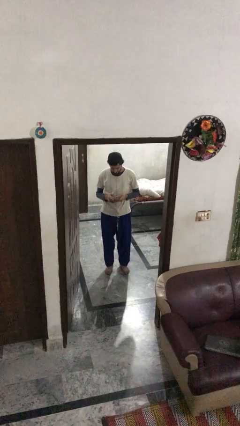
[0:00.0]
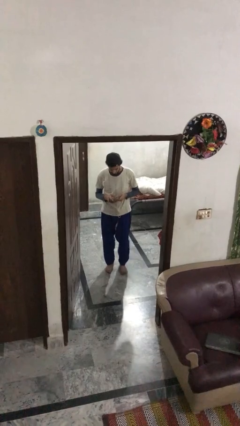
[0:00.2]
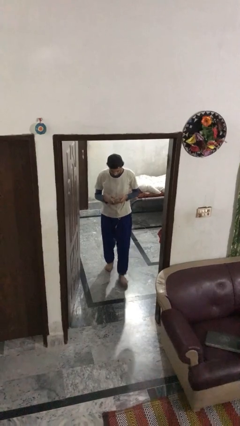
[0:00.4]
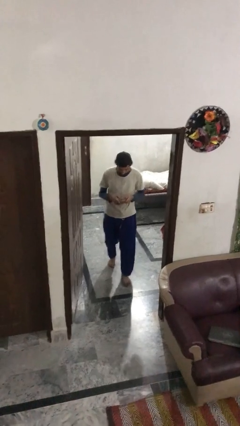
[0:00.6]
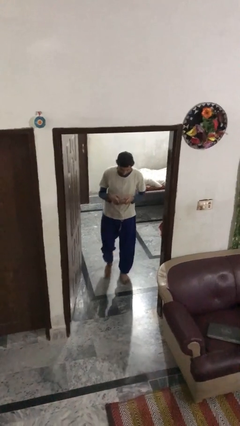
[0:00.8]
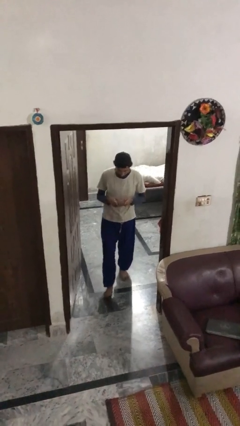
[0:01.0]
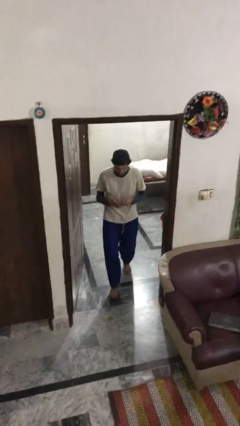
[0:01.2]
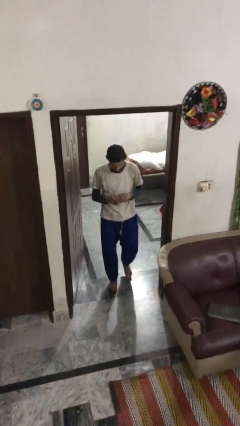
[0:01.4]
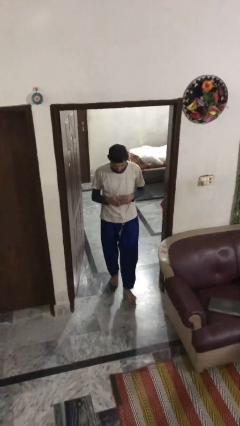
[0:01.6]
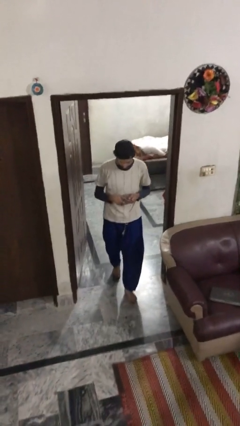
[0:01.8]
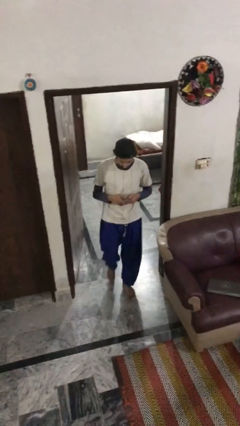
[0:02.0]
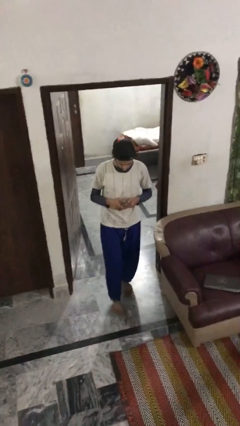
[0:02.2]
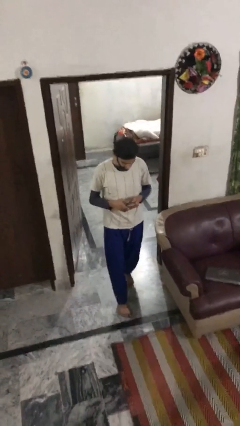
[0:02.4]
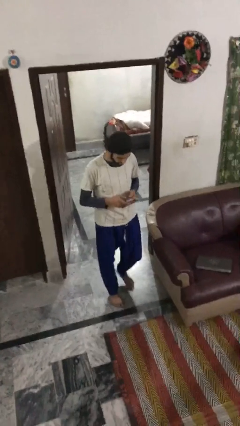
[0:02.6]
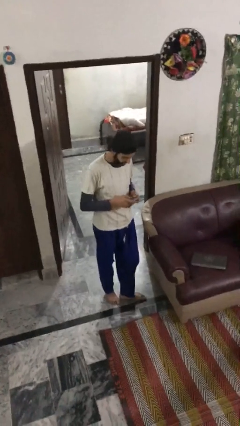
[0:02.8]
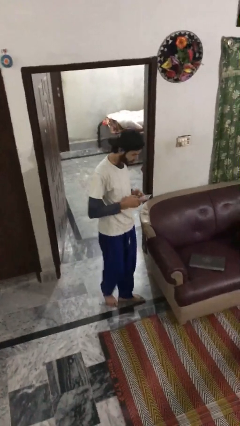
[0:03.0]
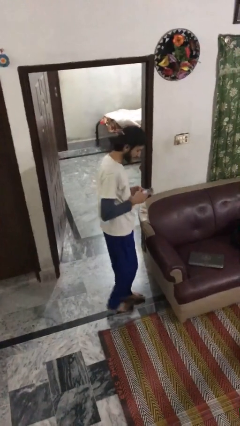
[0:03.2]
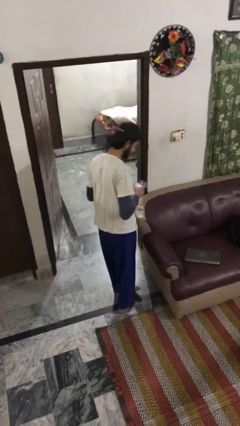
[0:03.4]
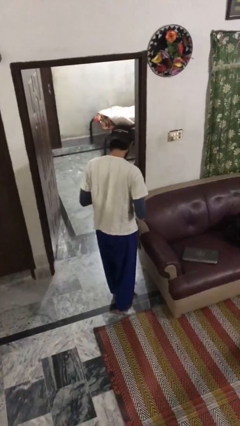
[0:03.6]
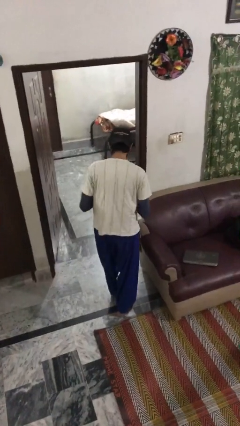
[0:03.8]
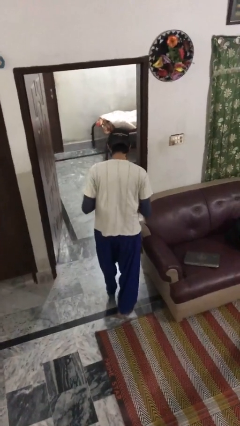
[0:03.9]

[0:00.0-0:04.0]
person enters scene through structure

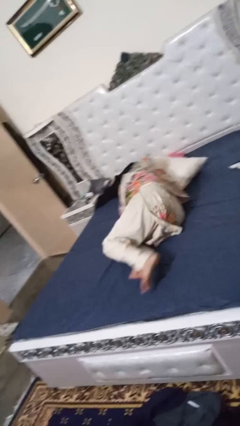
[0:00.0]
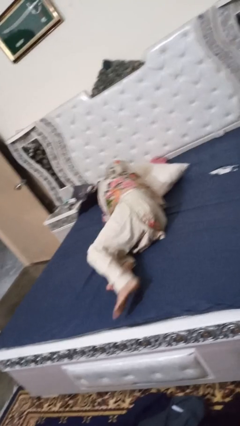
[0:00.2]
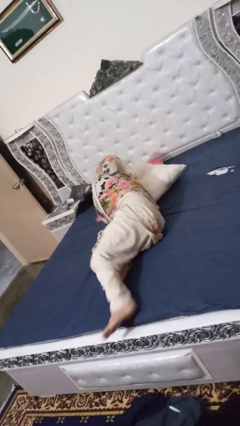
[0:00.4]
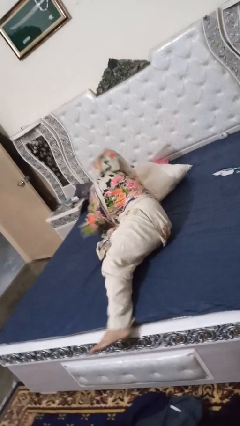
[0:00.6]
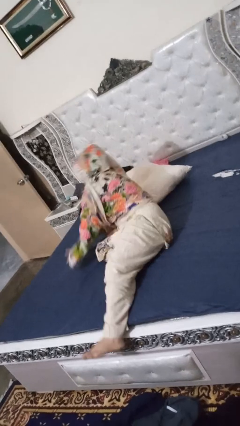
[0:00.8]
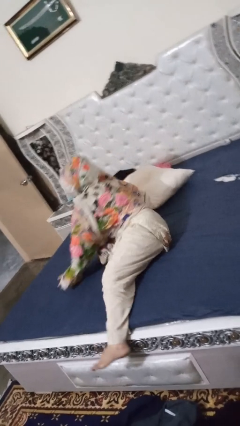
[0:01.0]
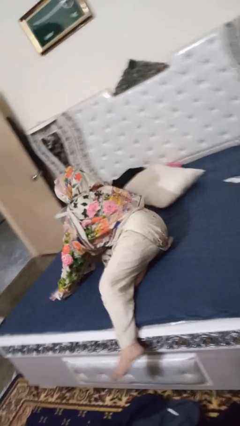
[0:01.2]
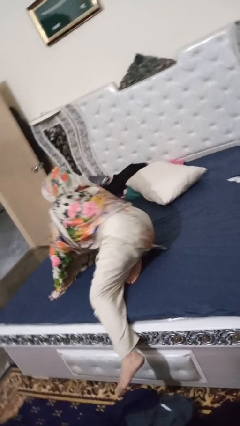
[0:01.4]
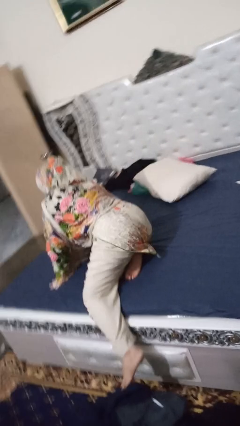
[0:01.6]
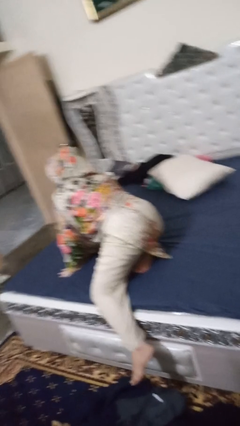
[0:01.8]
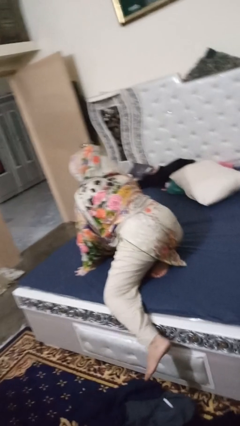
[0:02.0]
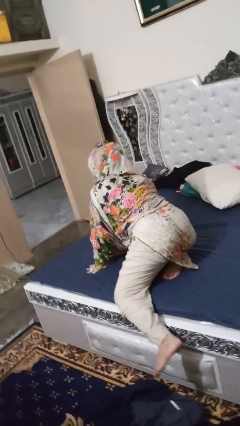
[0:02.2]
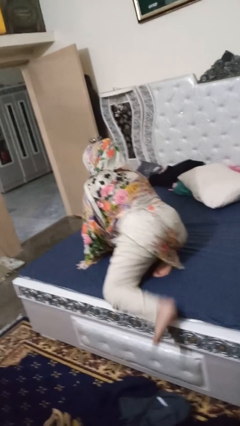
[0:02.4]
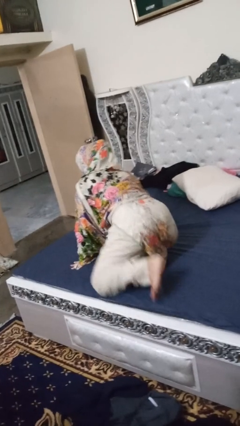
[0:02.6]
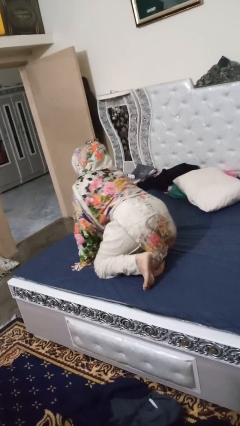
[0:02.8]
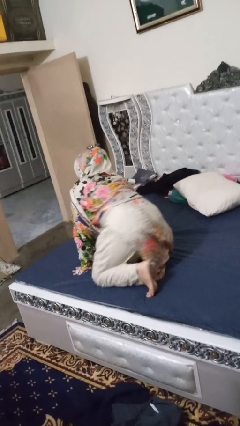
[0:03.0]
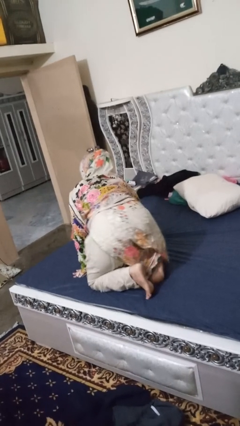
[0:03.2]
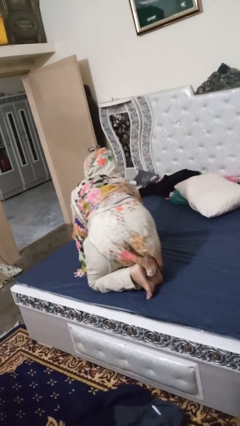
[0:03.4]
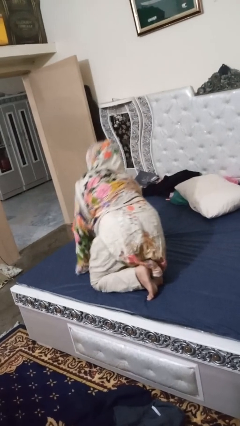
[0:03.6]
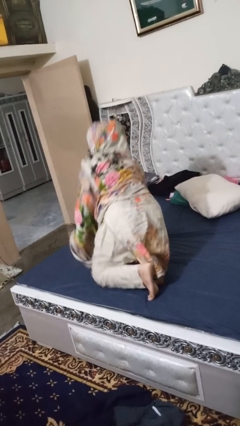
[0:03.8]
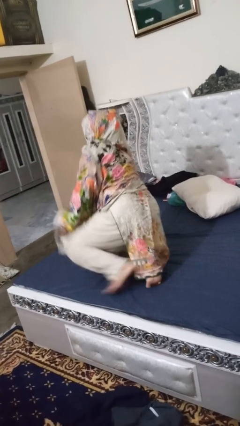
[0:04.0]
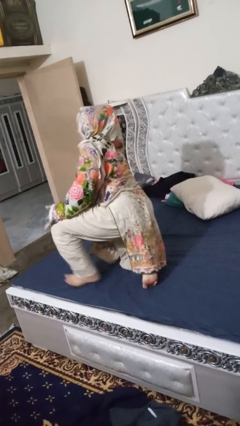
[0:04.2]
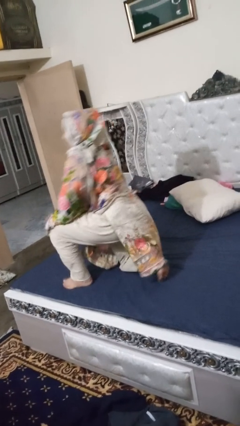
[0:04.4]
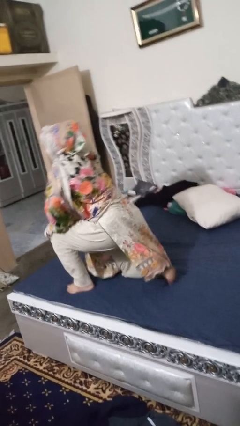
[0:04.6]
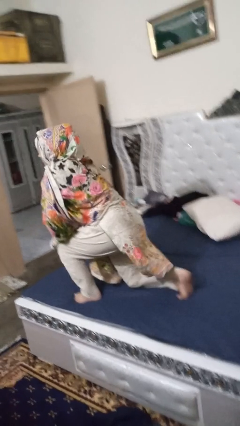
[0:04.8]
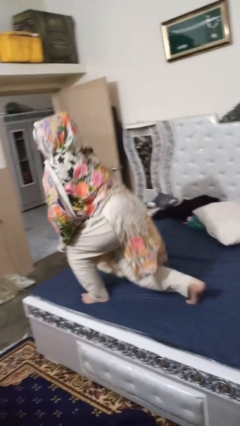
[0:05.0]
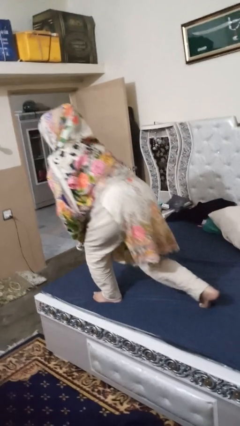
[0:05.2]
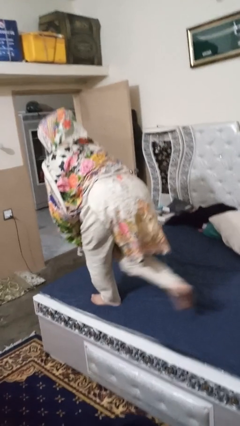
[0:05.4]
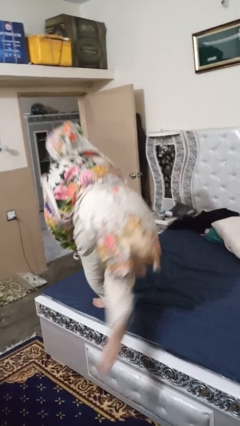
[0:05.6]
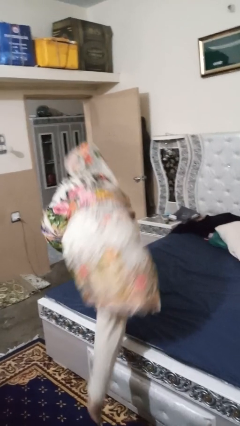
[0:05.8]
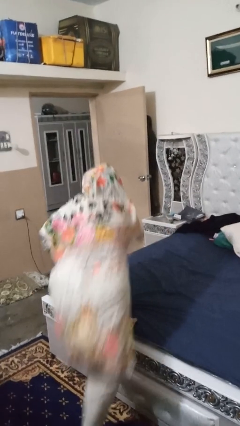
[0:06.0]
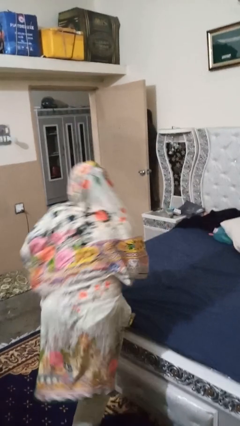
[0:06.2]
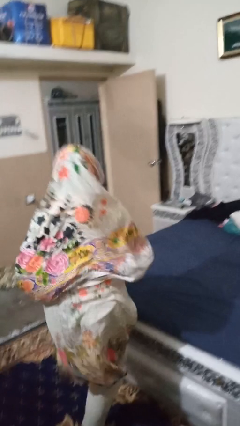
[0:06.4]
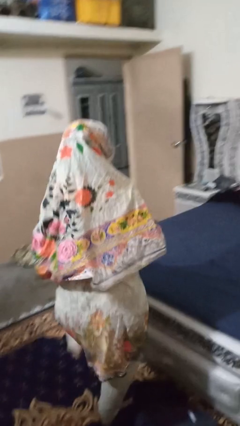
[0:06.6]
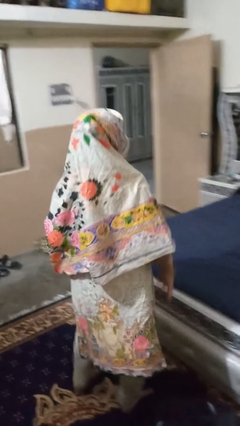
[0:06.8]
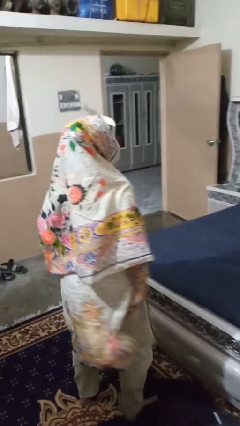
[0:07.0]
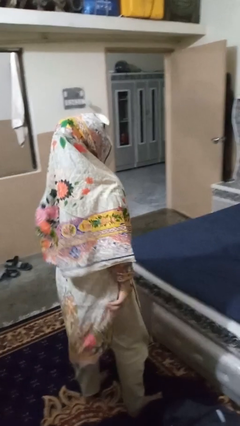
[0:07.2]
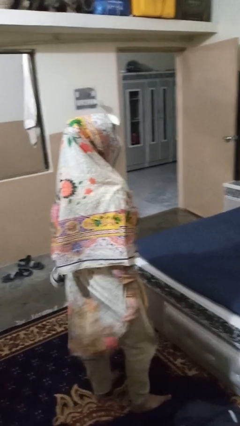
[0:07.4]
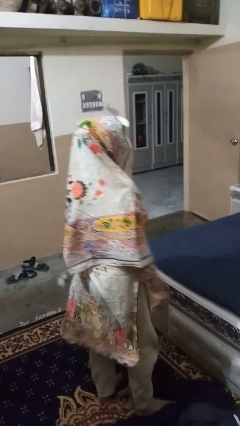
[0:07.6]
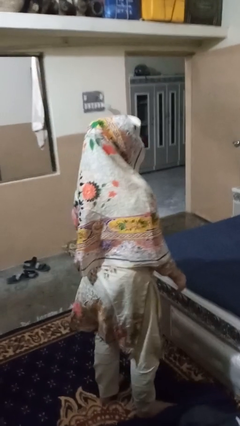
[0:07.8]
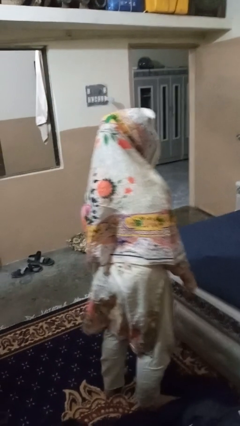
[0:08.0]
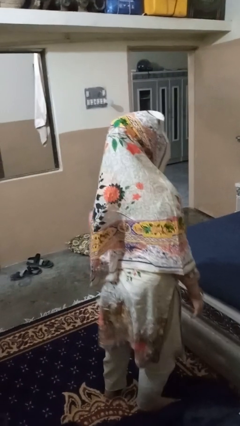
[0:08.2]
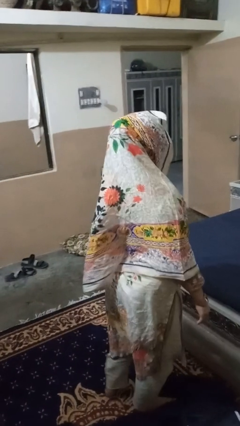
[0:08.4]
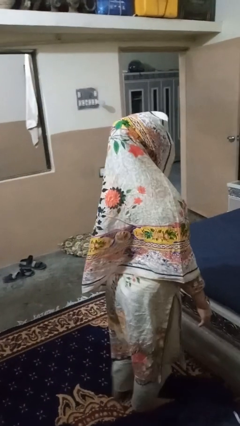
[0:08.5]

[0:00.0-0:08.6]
person stands up

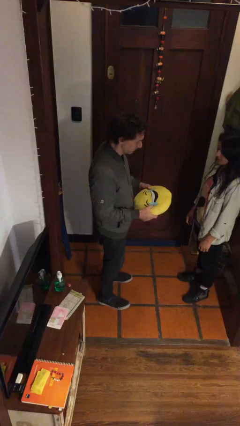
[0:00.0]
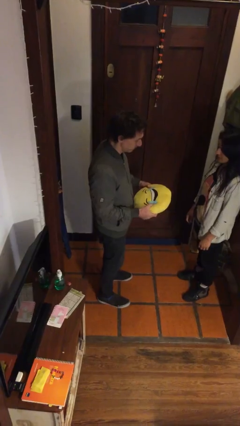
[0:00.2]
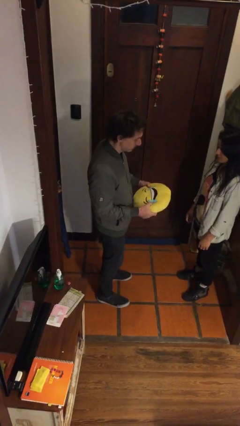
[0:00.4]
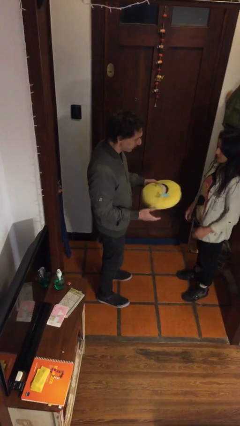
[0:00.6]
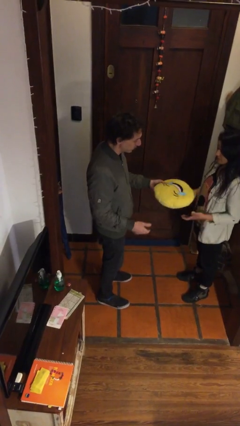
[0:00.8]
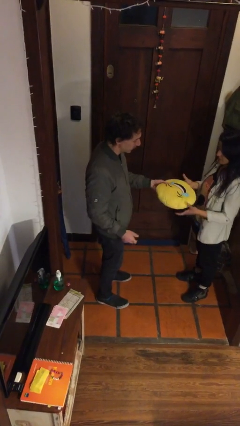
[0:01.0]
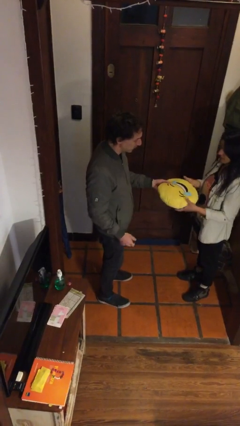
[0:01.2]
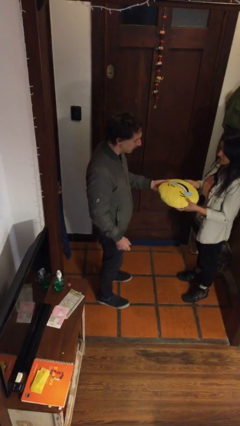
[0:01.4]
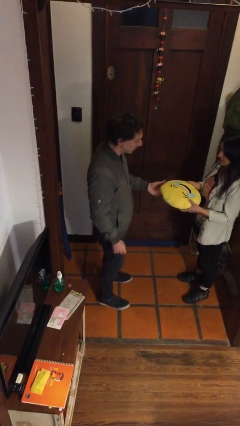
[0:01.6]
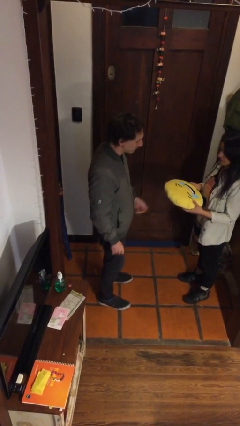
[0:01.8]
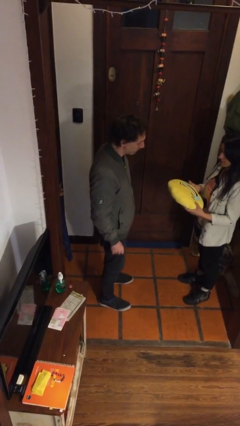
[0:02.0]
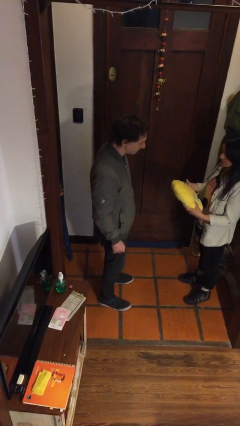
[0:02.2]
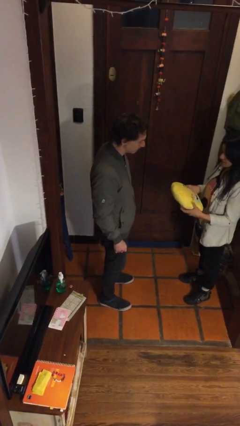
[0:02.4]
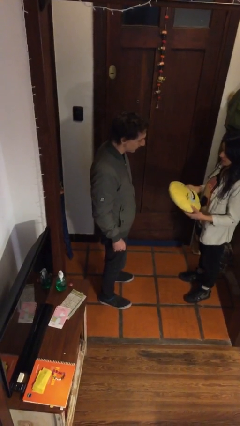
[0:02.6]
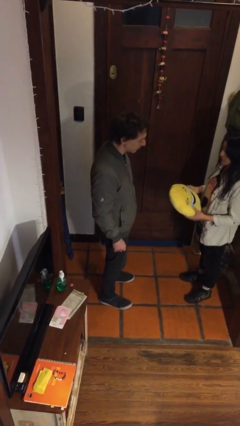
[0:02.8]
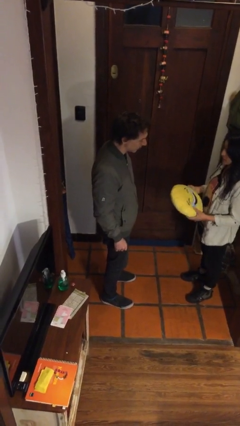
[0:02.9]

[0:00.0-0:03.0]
person transfers object to person

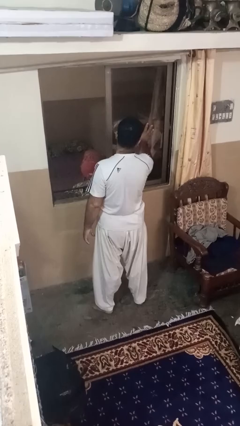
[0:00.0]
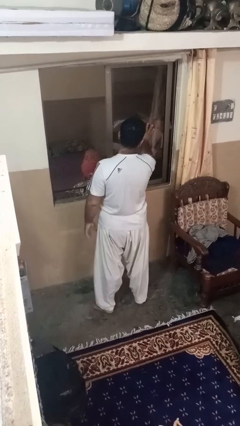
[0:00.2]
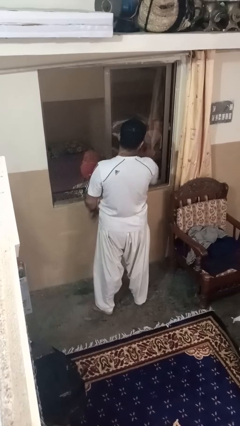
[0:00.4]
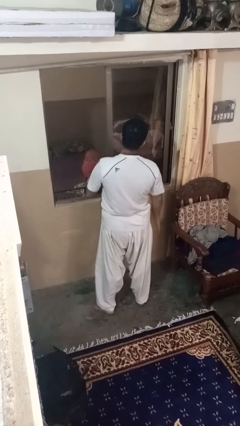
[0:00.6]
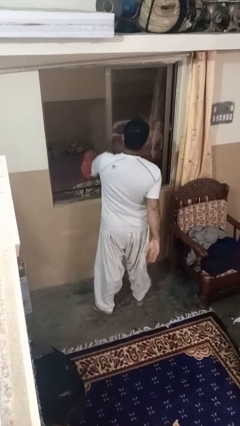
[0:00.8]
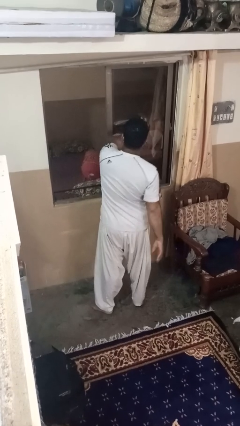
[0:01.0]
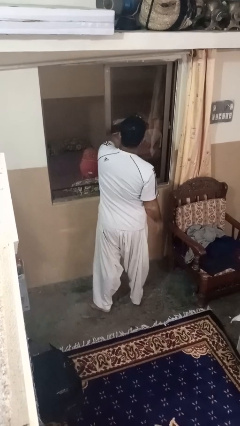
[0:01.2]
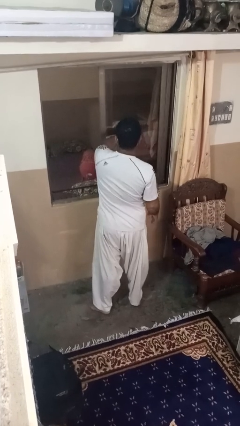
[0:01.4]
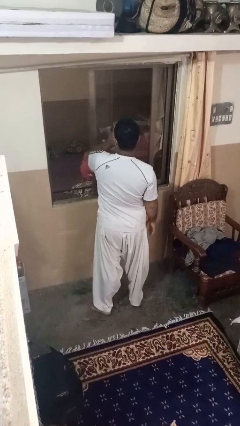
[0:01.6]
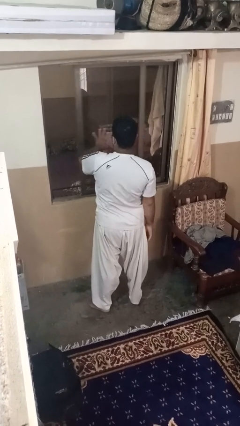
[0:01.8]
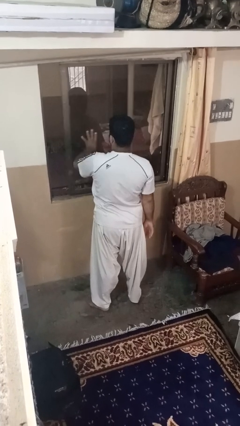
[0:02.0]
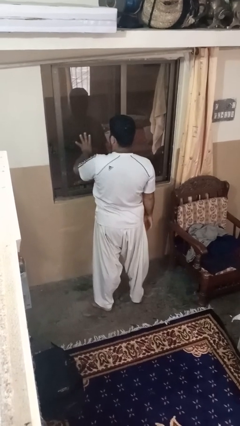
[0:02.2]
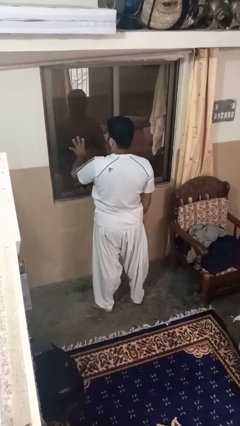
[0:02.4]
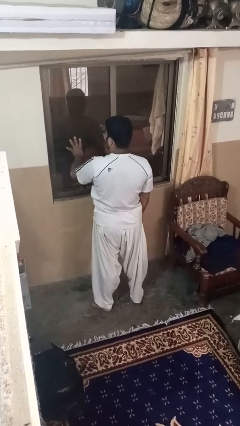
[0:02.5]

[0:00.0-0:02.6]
person closes home window
